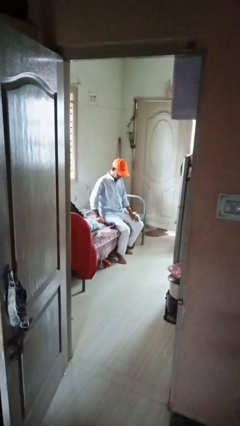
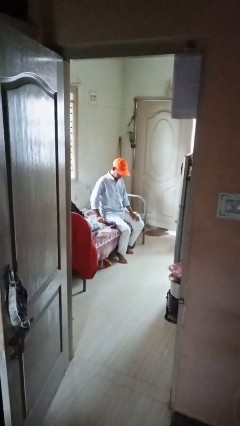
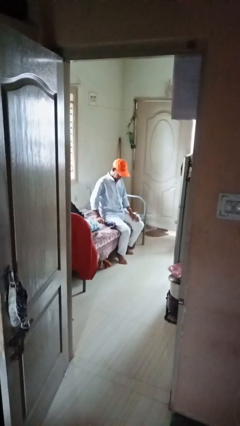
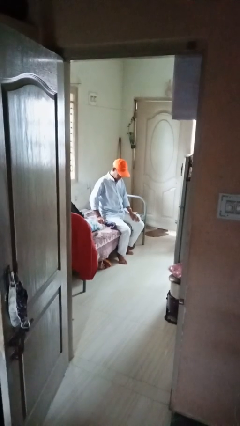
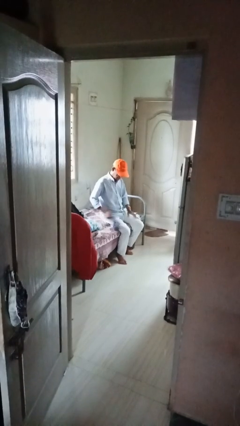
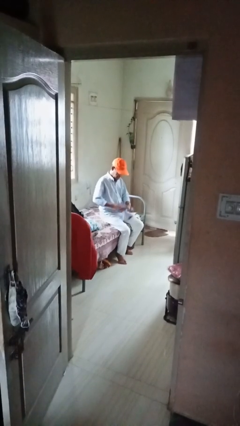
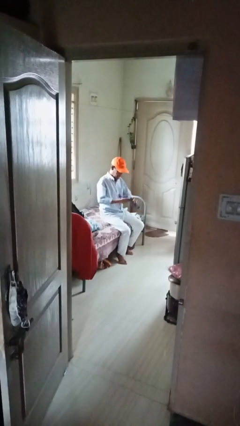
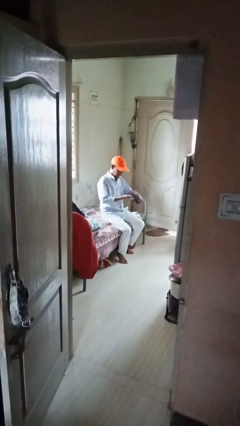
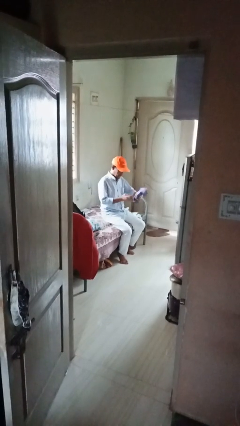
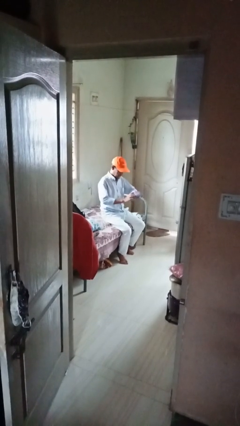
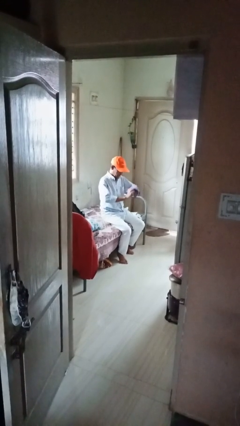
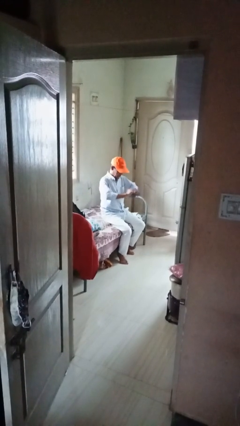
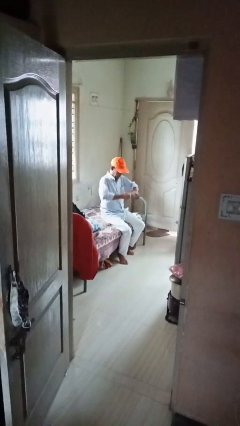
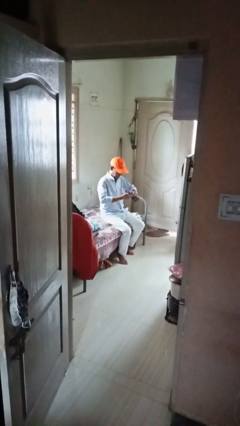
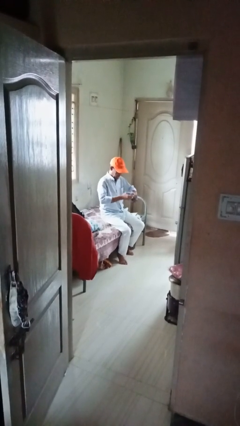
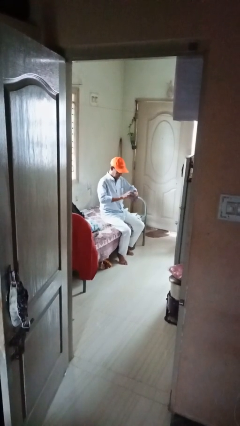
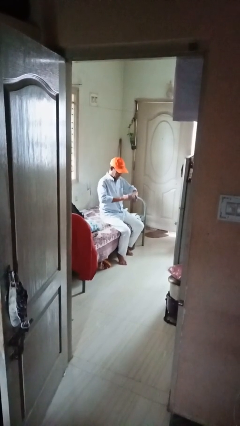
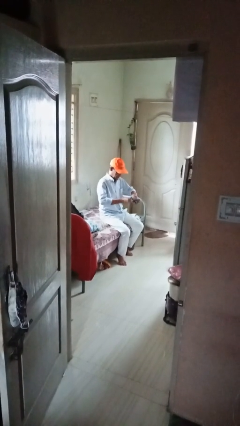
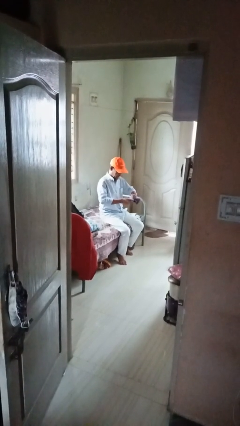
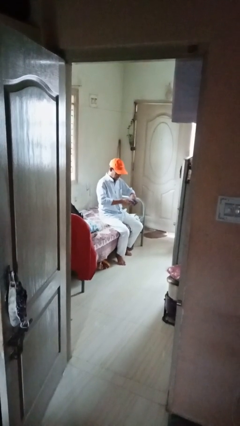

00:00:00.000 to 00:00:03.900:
person squeezes object

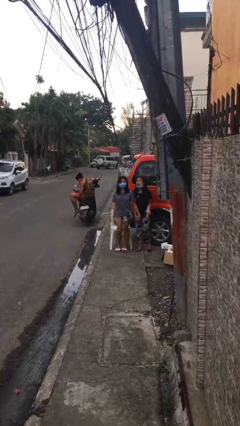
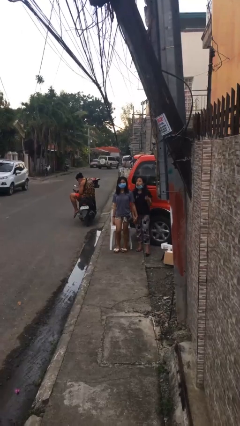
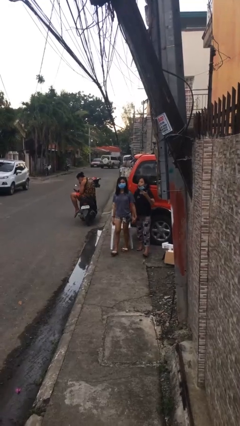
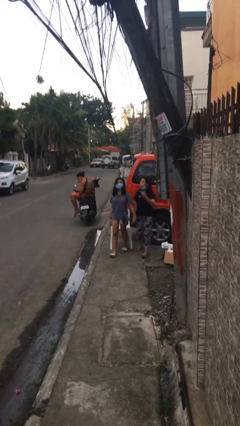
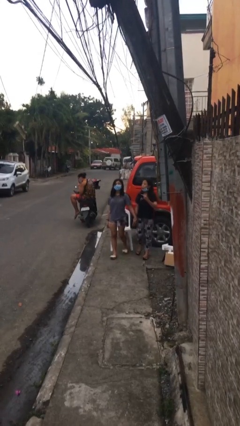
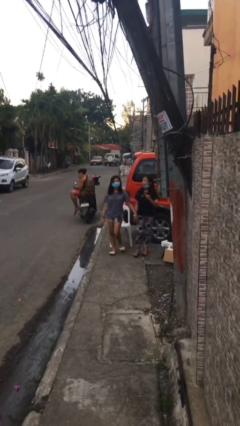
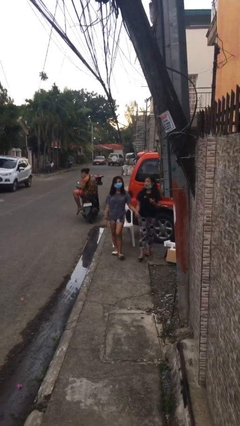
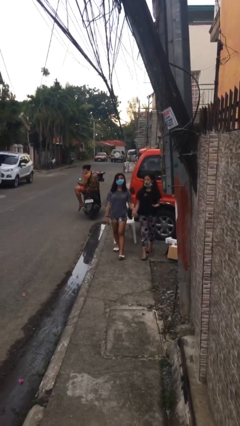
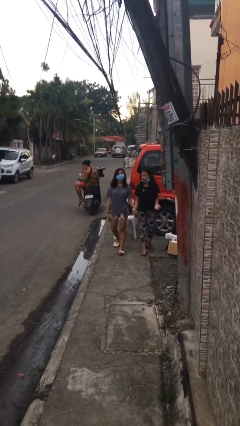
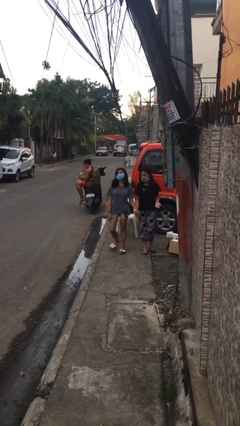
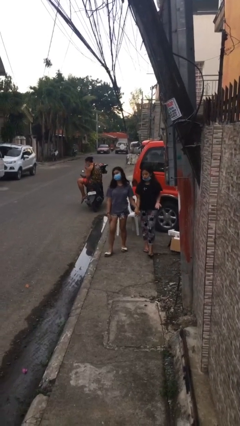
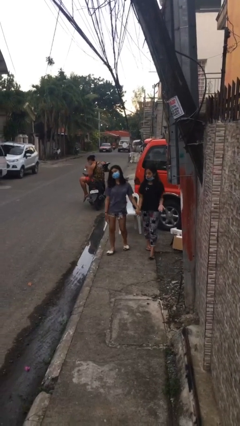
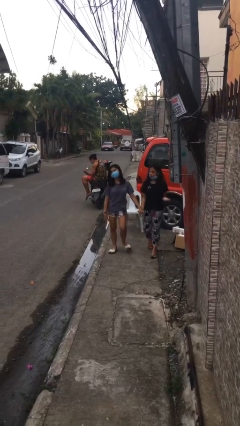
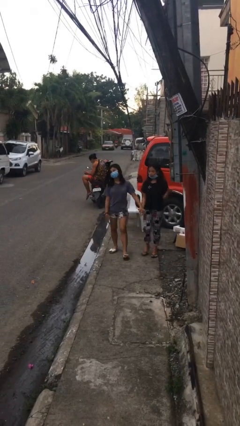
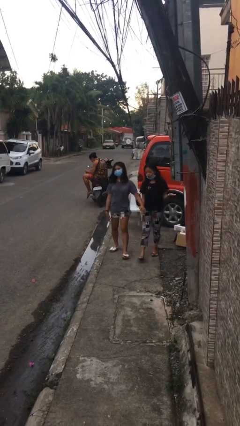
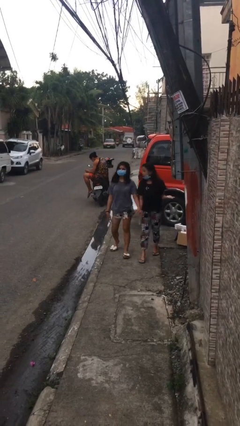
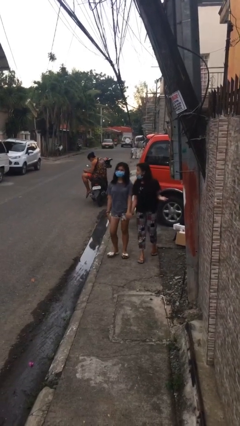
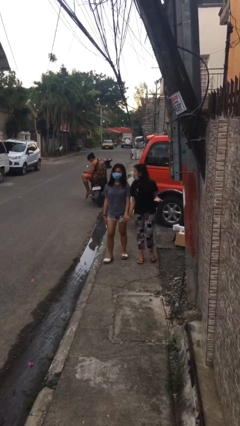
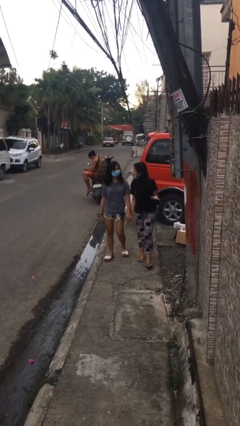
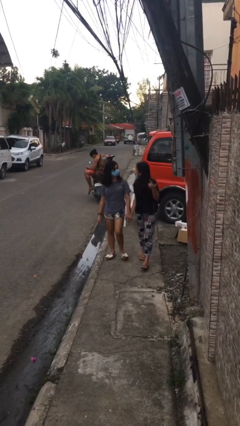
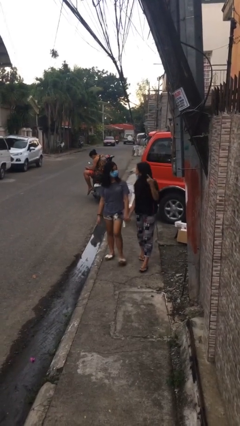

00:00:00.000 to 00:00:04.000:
person holds hand

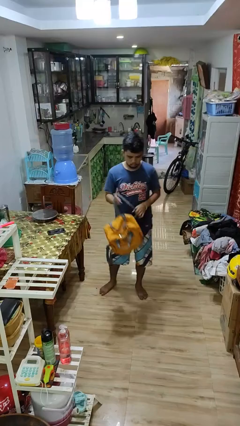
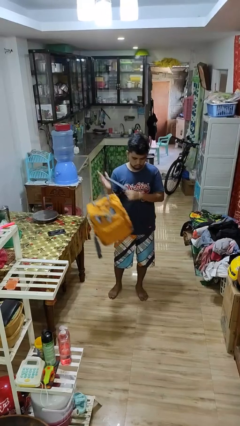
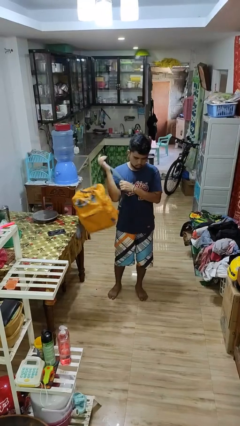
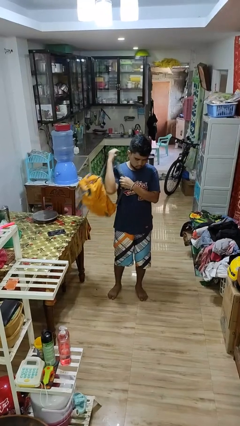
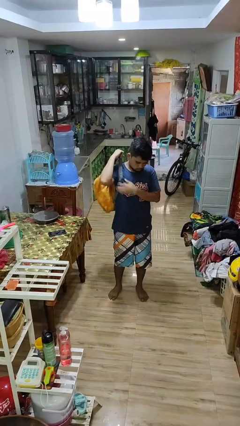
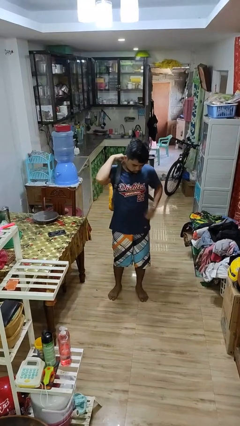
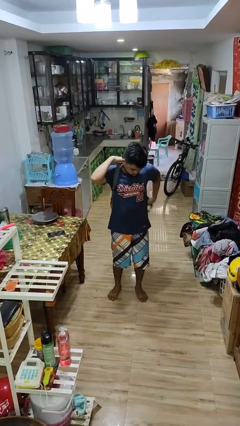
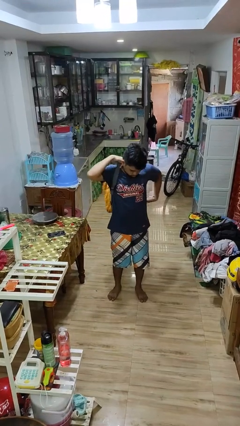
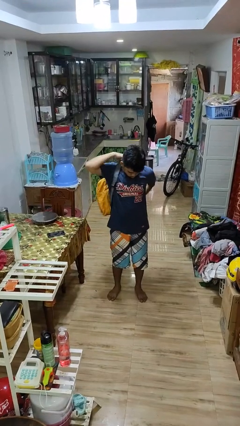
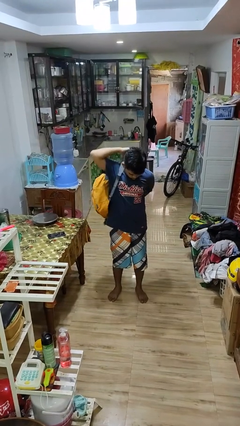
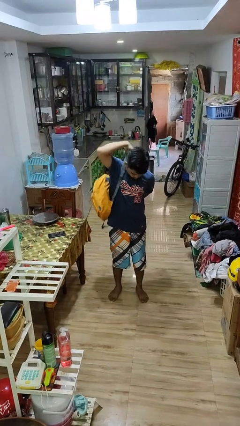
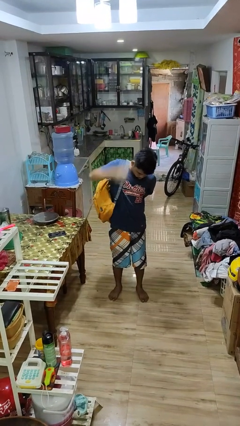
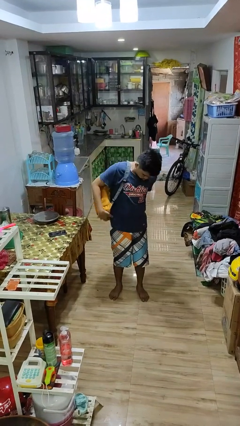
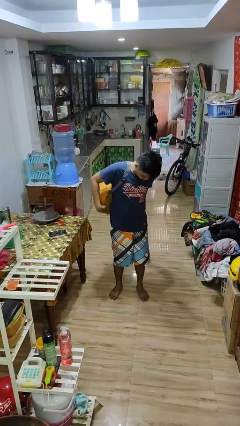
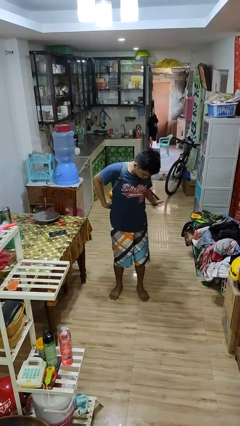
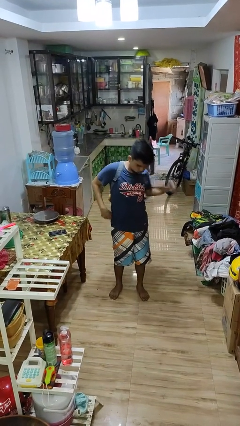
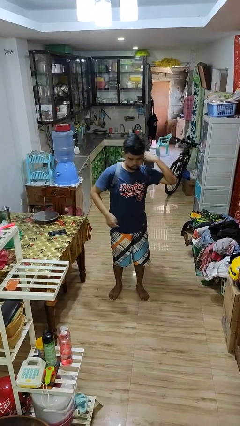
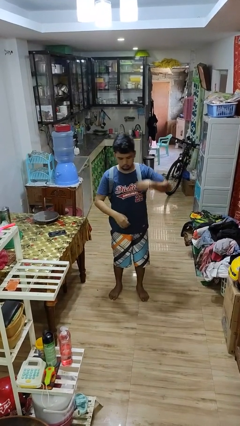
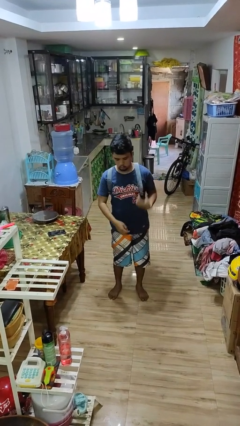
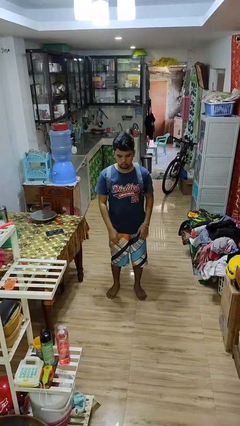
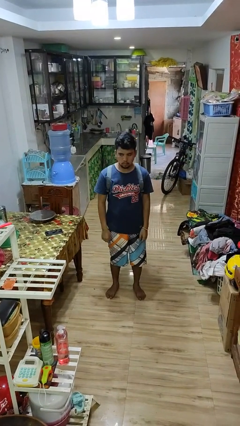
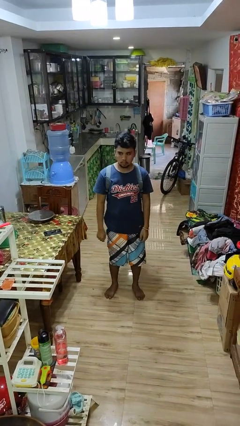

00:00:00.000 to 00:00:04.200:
person puts on backpack

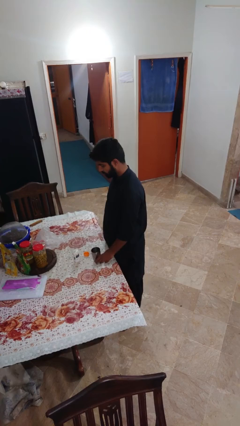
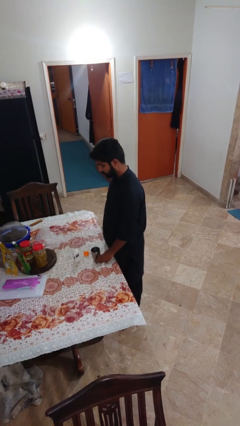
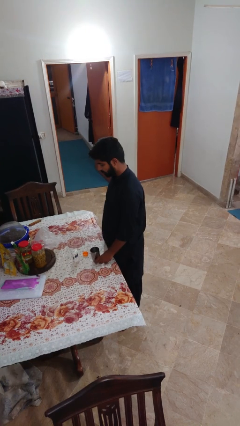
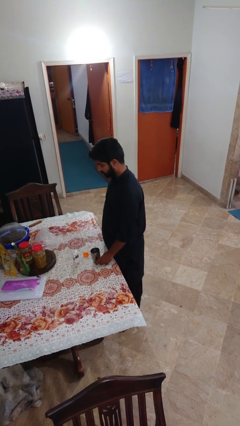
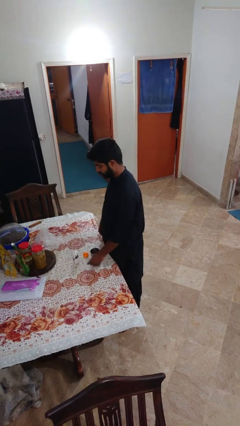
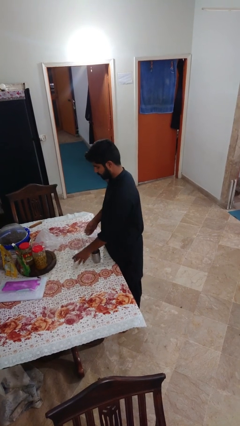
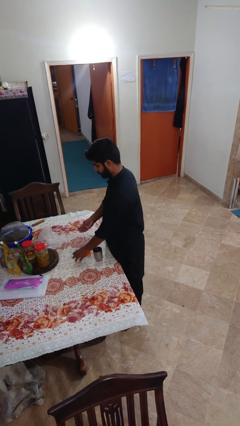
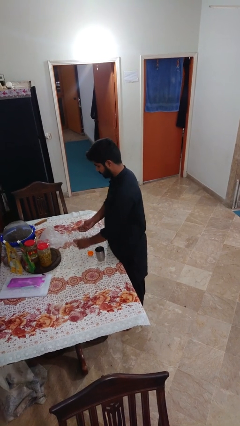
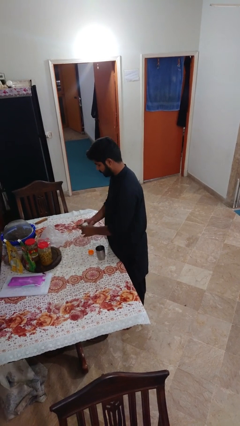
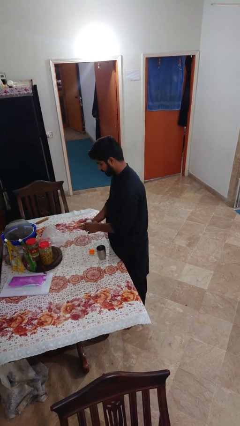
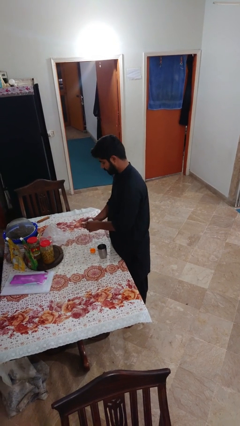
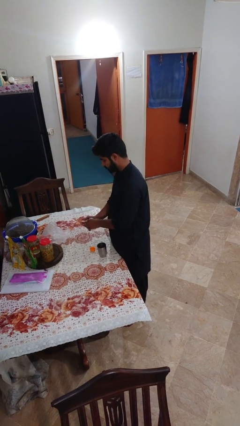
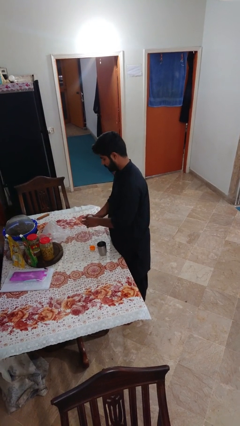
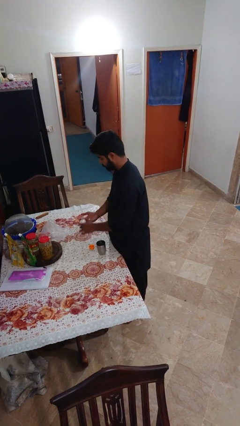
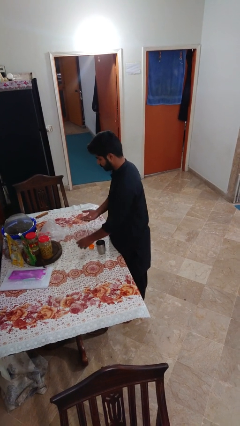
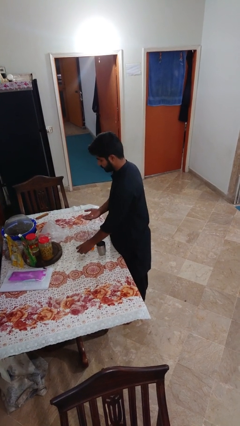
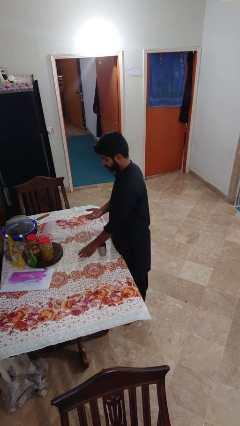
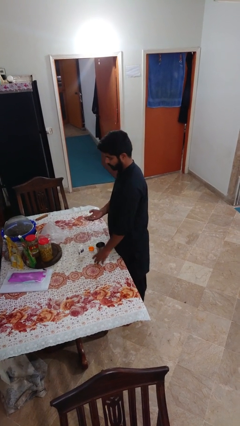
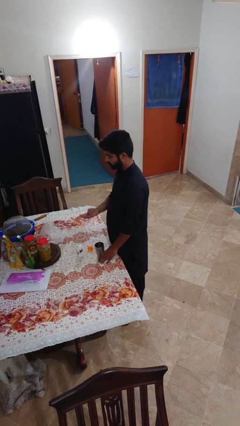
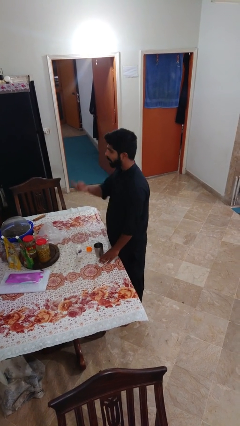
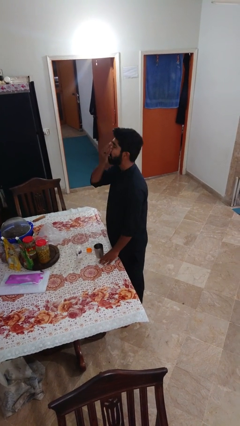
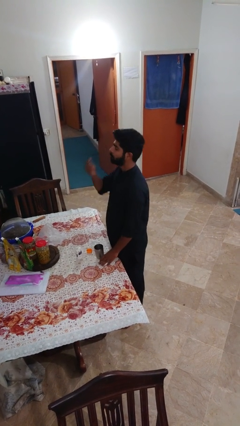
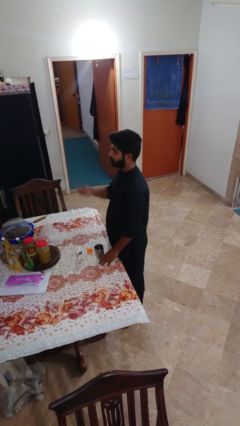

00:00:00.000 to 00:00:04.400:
person takes medicine pills

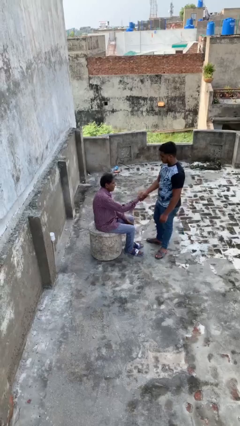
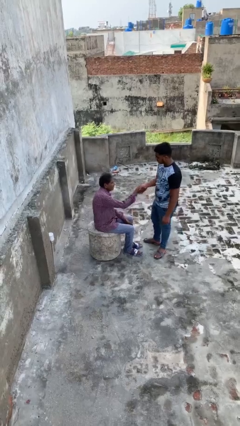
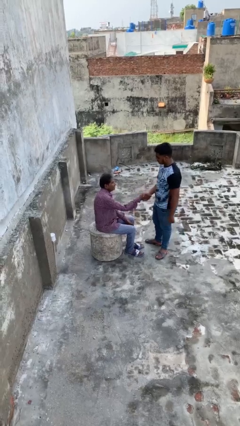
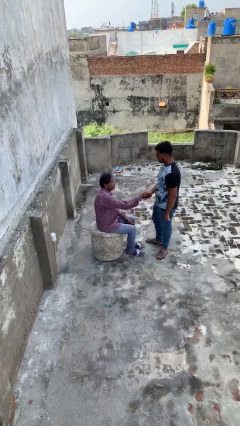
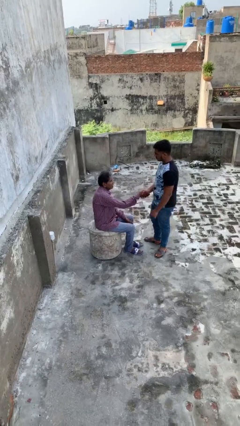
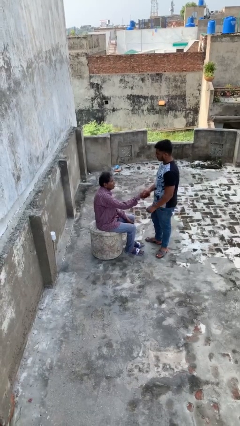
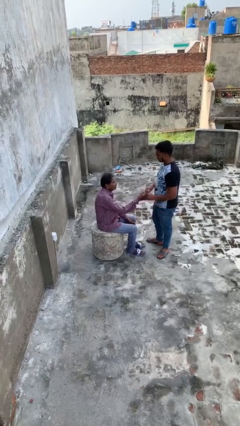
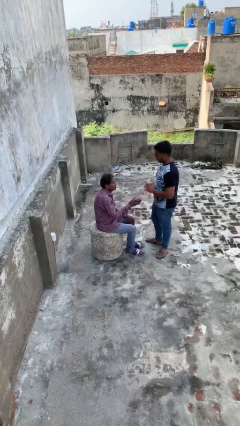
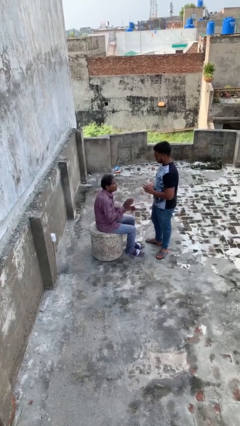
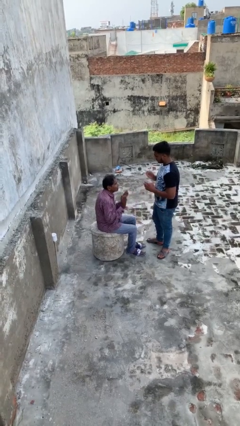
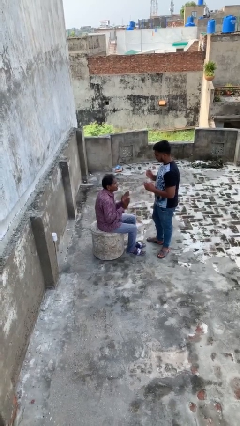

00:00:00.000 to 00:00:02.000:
person shakes hand
